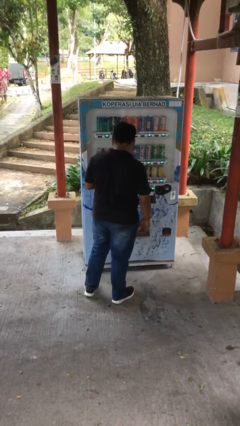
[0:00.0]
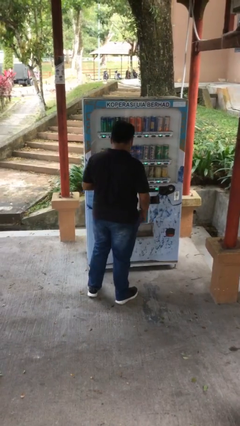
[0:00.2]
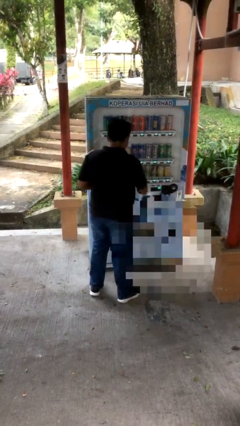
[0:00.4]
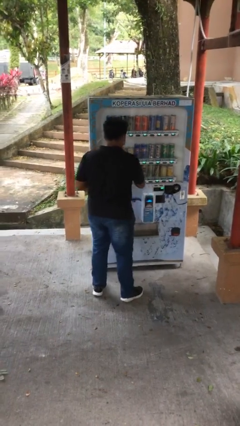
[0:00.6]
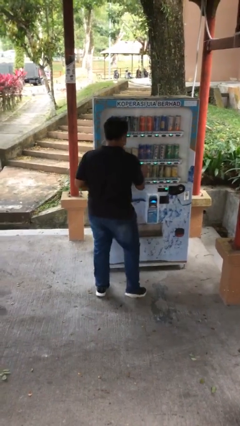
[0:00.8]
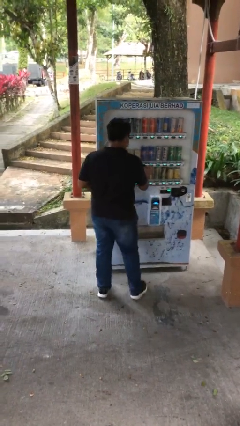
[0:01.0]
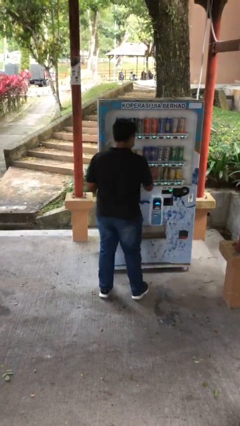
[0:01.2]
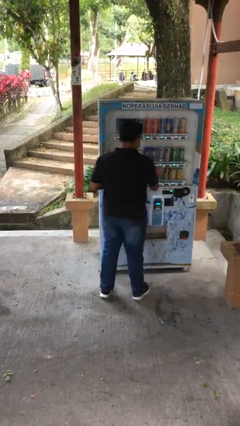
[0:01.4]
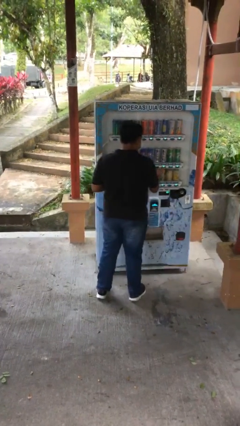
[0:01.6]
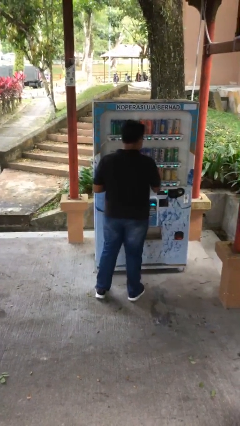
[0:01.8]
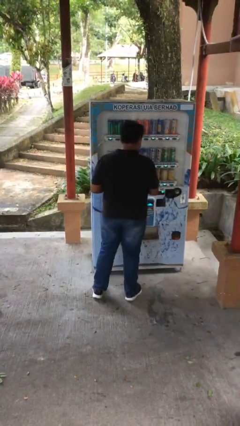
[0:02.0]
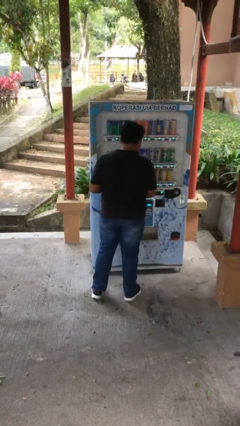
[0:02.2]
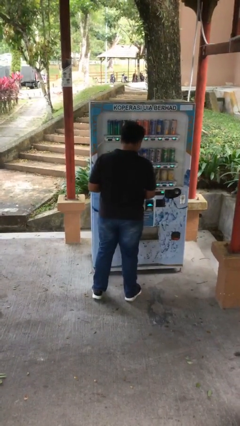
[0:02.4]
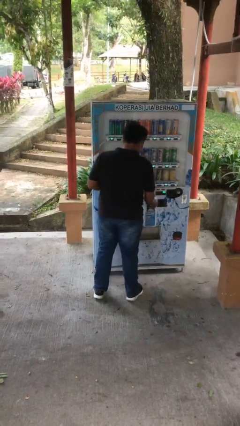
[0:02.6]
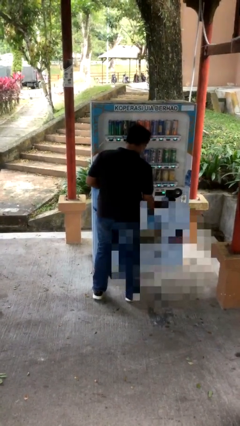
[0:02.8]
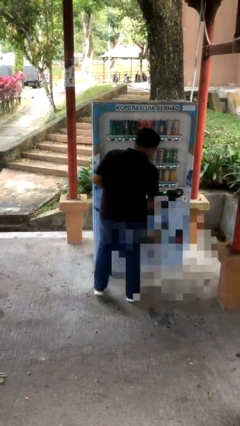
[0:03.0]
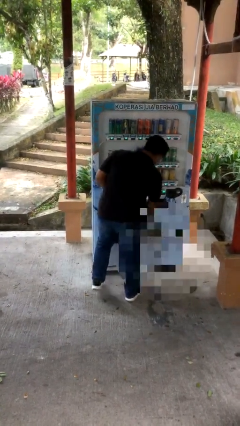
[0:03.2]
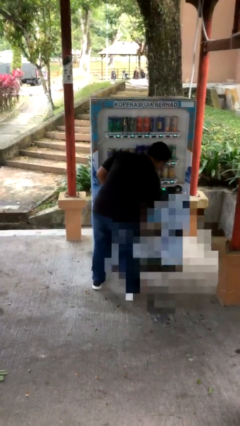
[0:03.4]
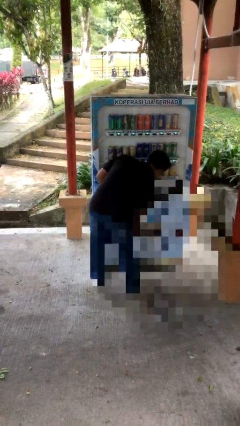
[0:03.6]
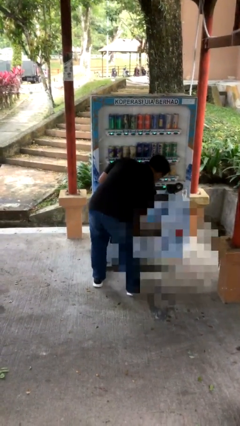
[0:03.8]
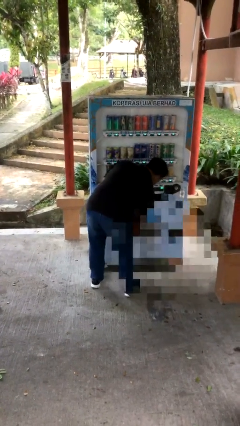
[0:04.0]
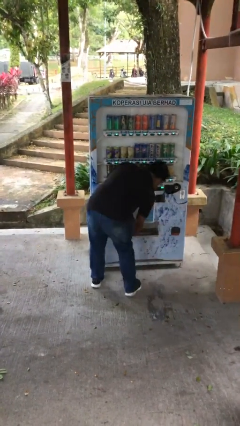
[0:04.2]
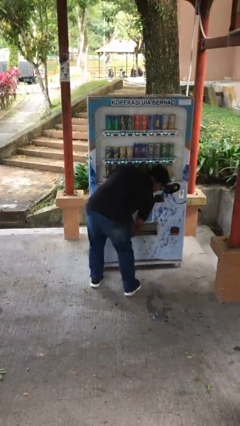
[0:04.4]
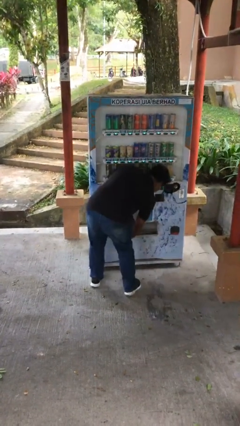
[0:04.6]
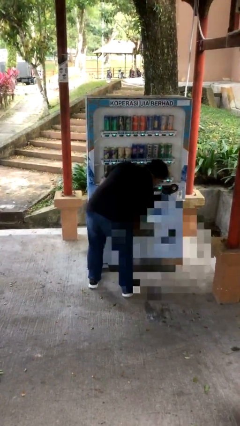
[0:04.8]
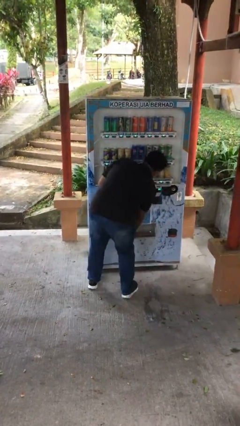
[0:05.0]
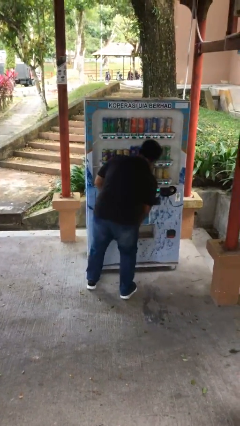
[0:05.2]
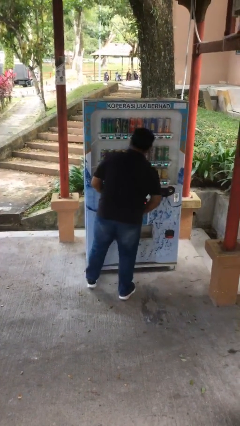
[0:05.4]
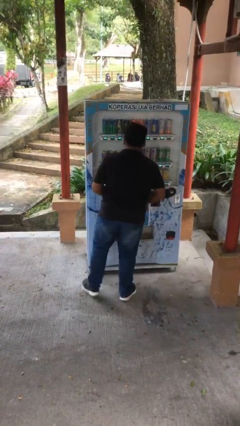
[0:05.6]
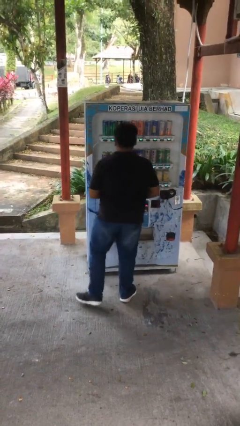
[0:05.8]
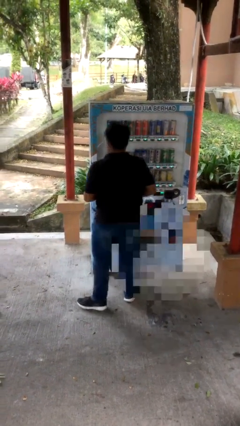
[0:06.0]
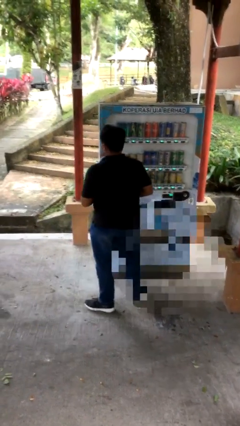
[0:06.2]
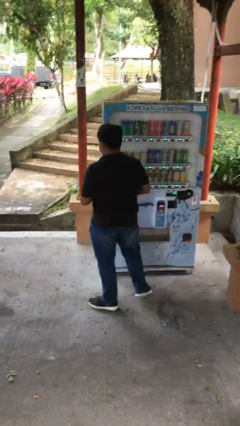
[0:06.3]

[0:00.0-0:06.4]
person purchases from machine

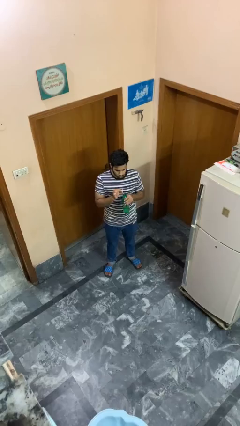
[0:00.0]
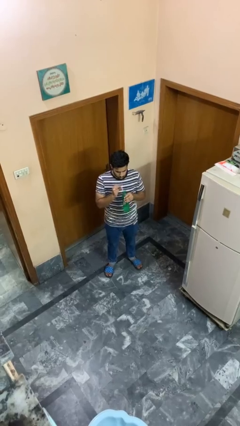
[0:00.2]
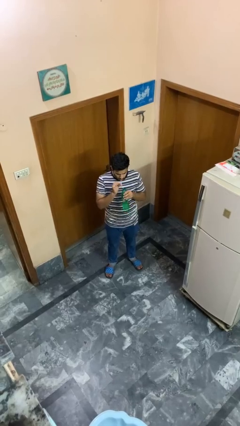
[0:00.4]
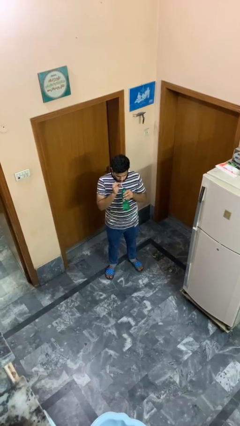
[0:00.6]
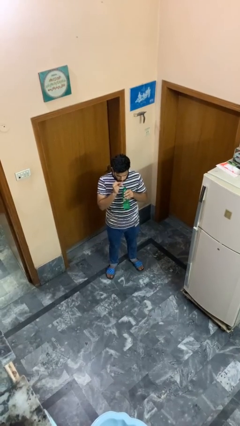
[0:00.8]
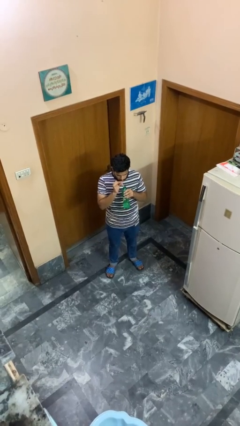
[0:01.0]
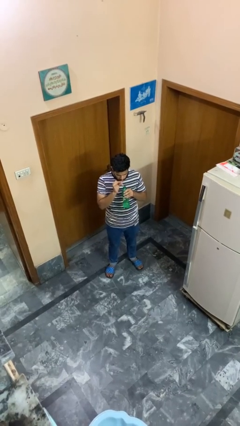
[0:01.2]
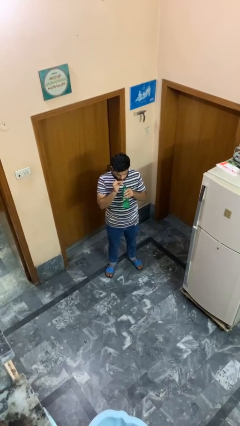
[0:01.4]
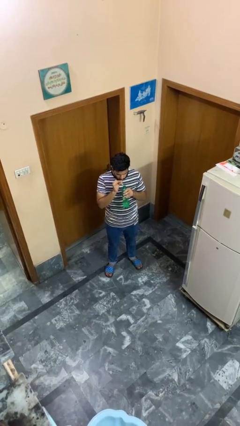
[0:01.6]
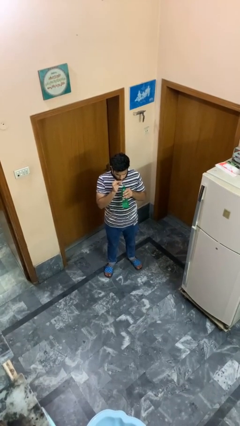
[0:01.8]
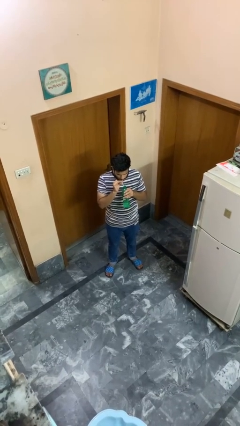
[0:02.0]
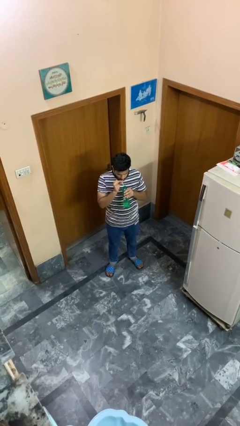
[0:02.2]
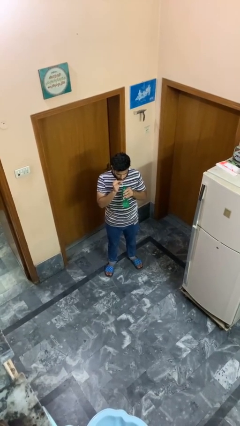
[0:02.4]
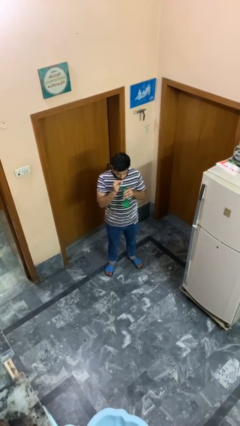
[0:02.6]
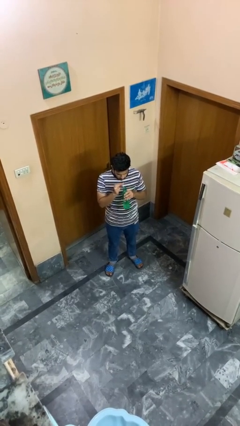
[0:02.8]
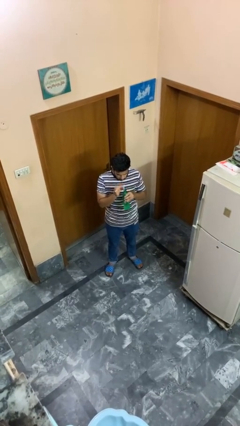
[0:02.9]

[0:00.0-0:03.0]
person drinks from straw

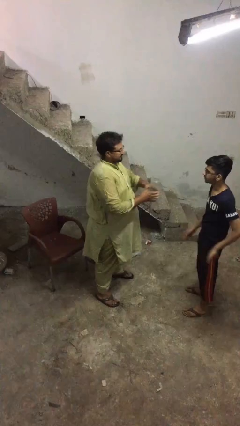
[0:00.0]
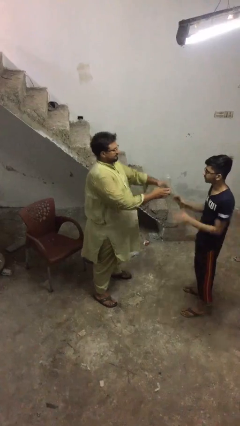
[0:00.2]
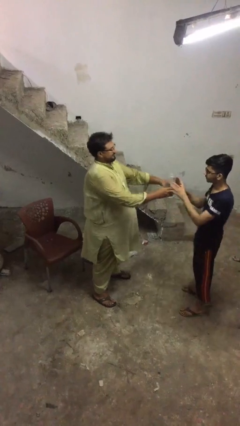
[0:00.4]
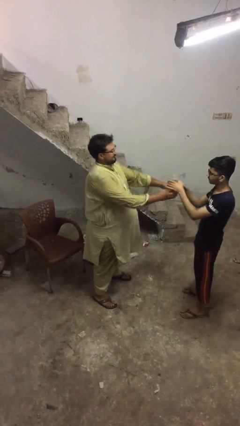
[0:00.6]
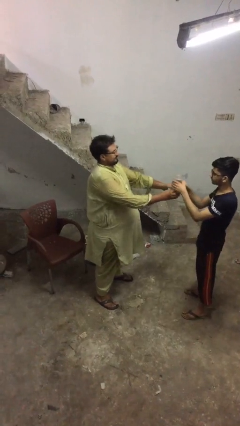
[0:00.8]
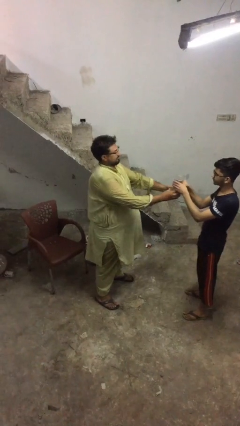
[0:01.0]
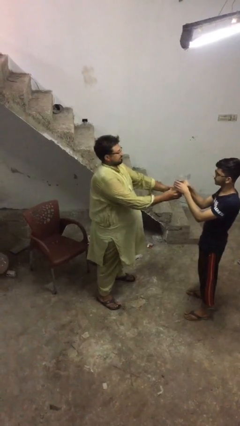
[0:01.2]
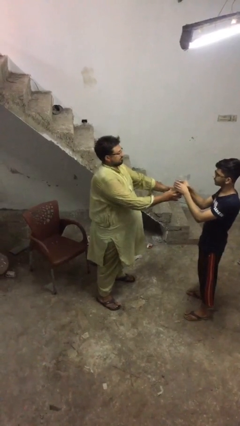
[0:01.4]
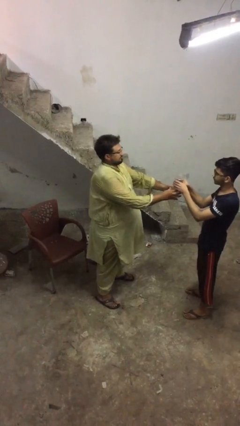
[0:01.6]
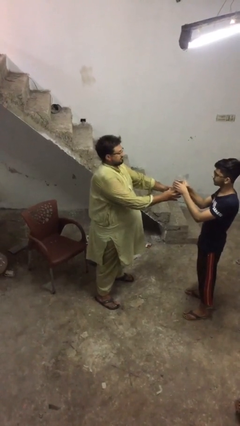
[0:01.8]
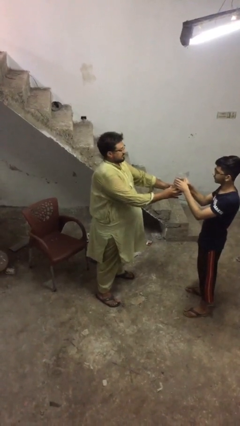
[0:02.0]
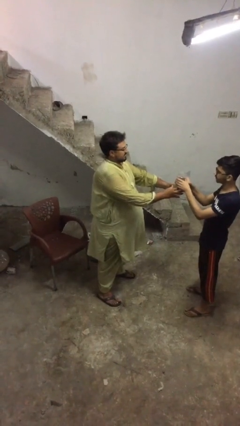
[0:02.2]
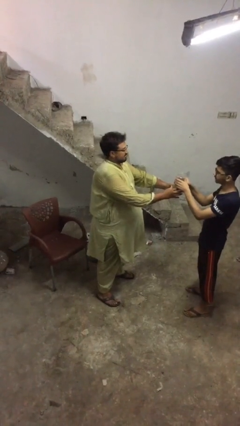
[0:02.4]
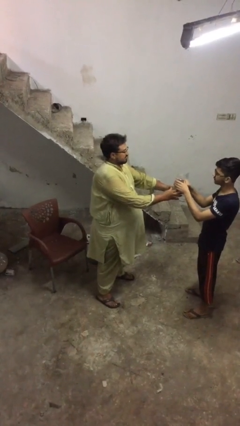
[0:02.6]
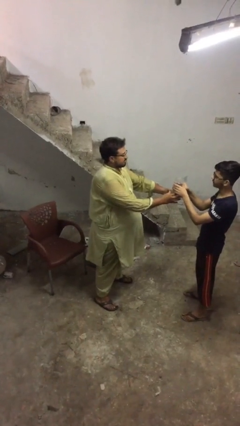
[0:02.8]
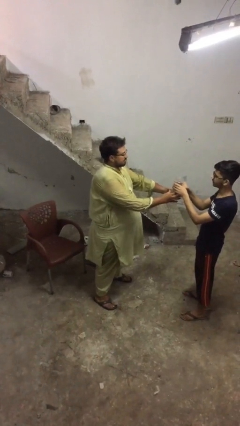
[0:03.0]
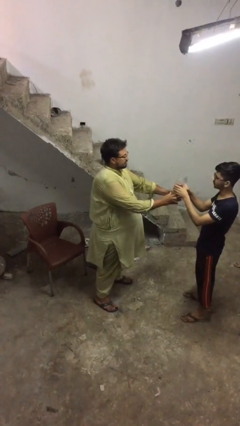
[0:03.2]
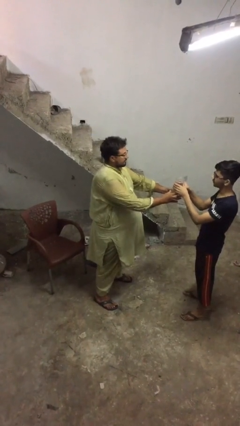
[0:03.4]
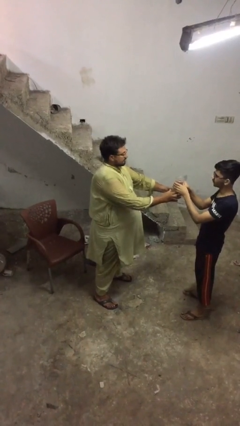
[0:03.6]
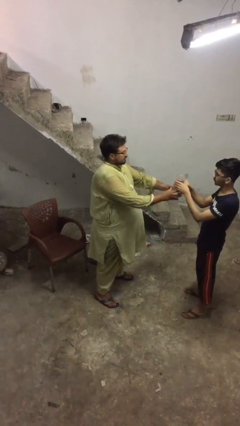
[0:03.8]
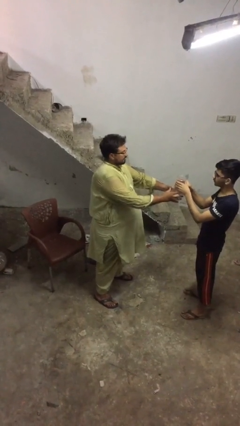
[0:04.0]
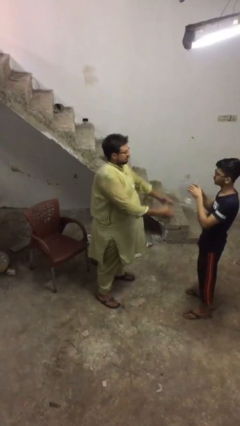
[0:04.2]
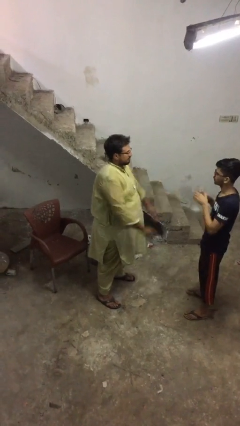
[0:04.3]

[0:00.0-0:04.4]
person transfers object to person

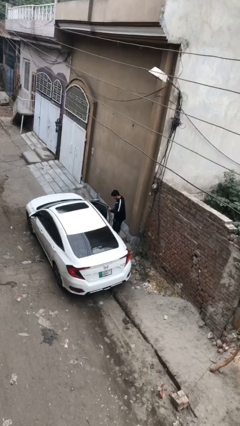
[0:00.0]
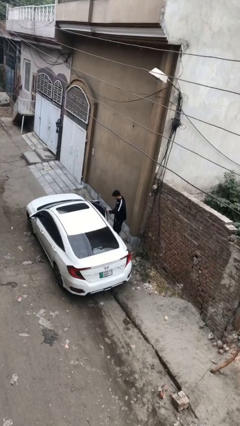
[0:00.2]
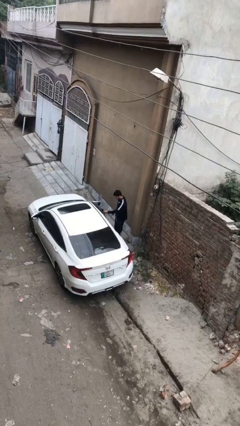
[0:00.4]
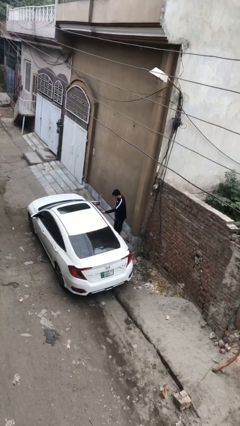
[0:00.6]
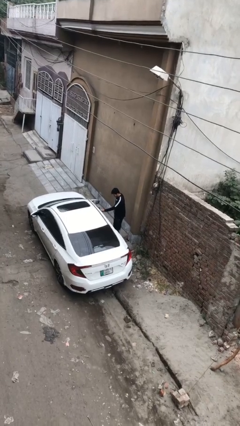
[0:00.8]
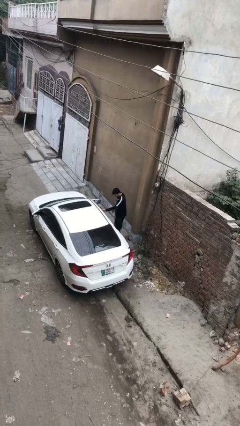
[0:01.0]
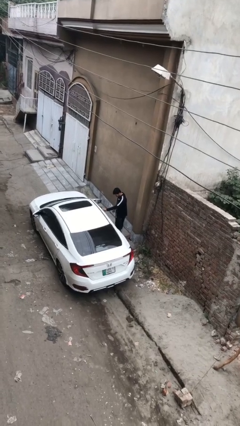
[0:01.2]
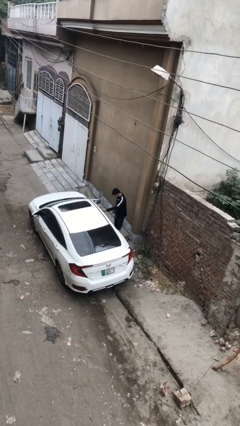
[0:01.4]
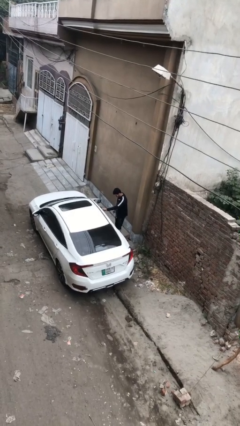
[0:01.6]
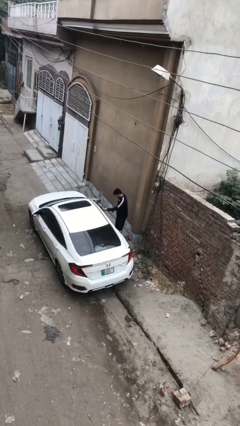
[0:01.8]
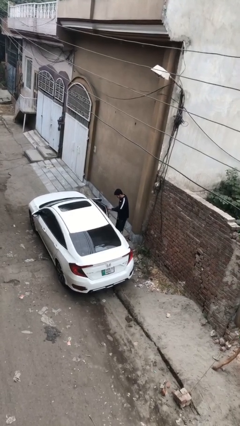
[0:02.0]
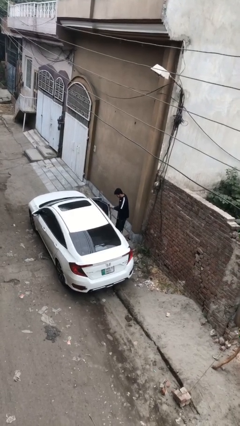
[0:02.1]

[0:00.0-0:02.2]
person closes car door

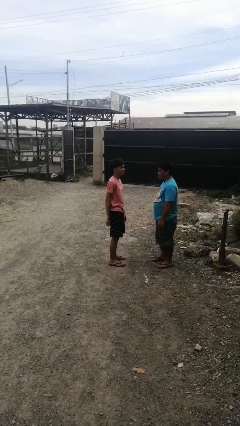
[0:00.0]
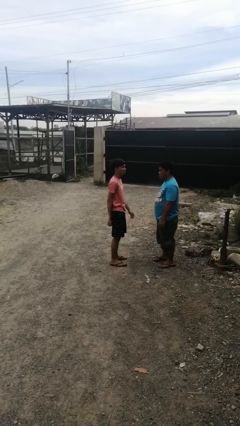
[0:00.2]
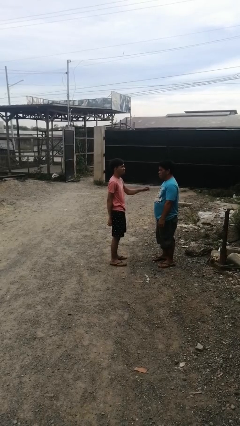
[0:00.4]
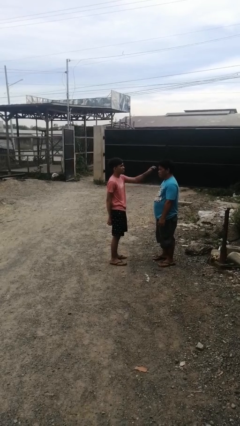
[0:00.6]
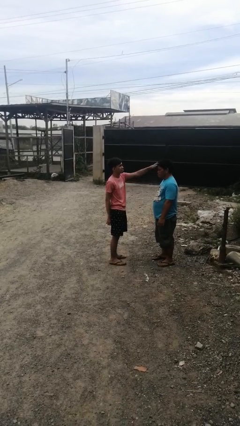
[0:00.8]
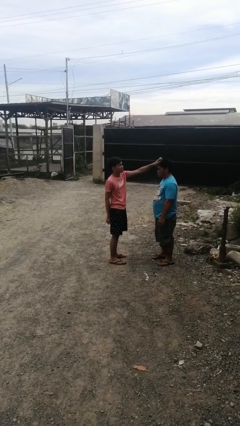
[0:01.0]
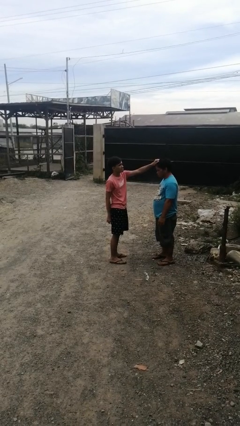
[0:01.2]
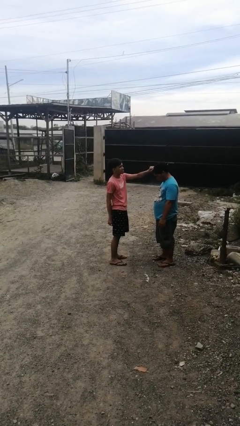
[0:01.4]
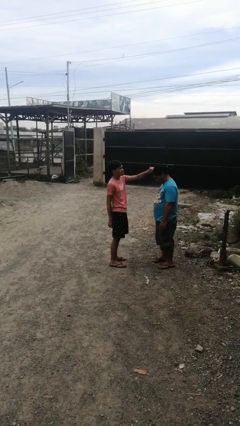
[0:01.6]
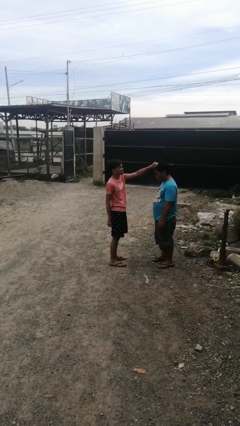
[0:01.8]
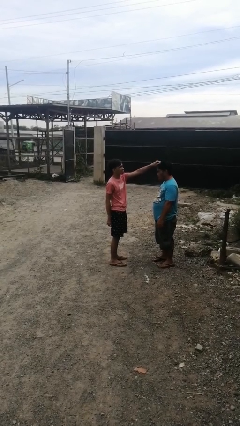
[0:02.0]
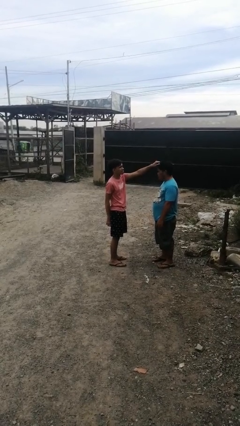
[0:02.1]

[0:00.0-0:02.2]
person grabs person by hair
